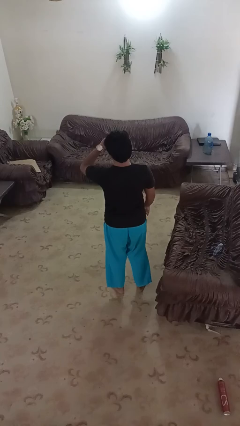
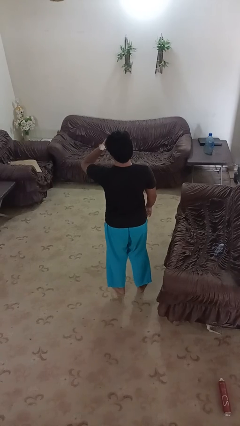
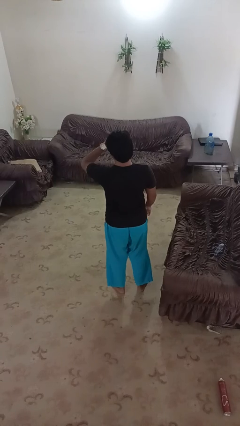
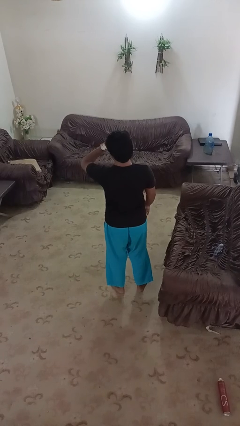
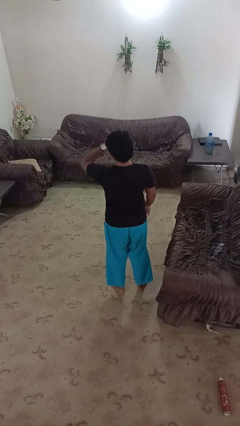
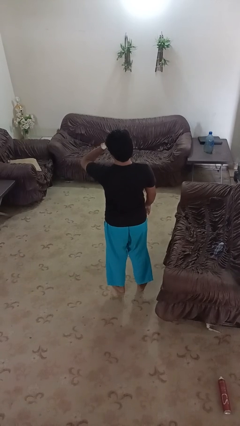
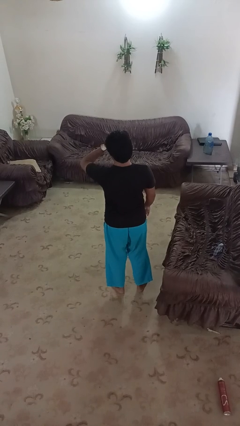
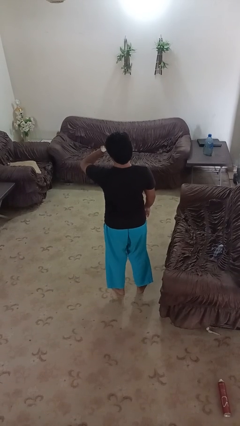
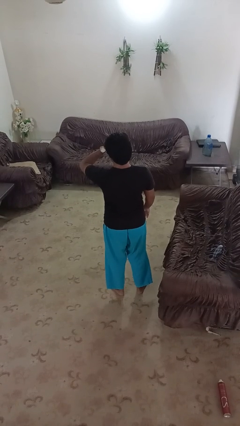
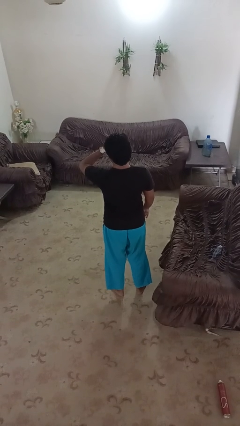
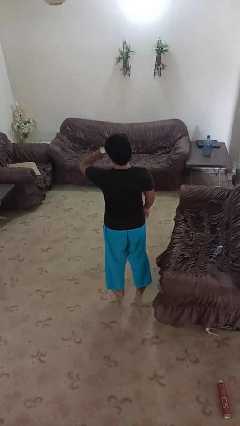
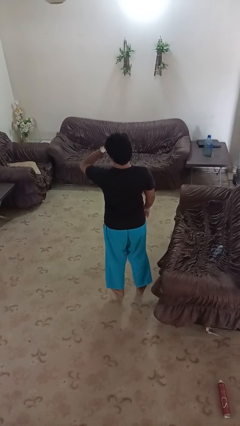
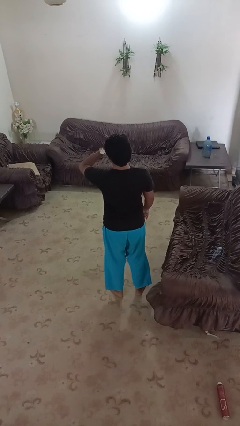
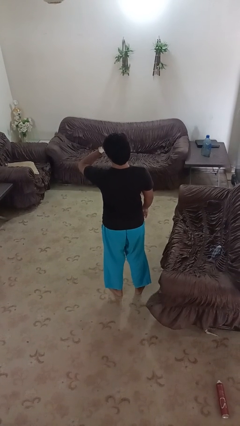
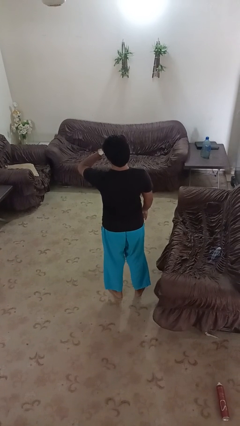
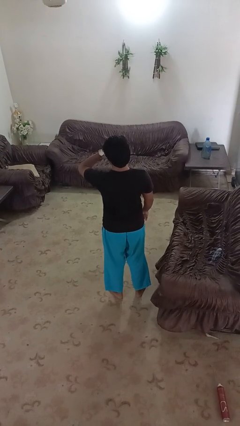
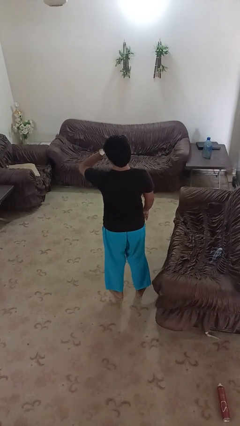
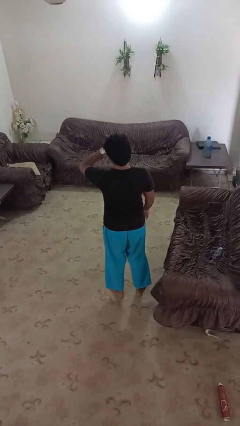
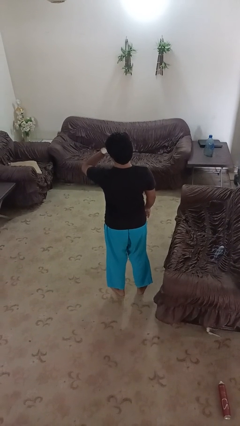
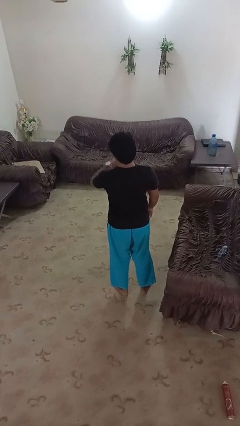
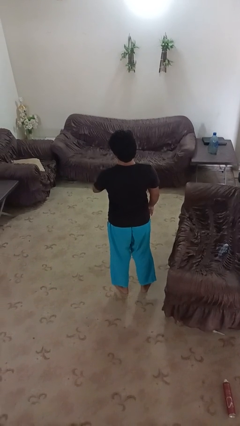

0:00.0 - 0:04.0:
person looks at wristwatch

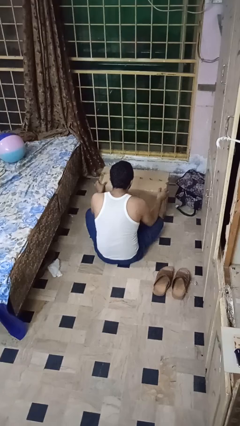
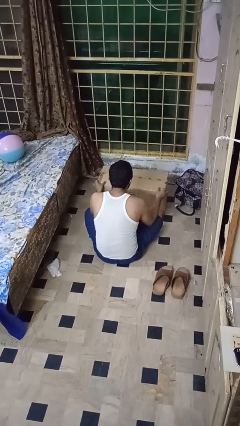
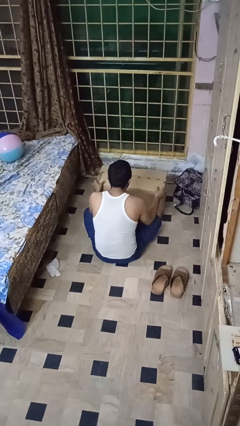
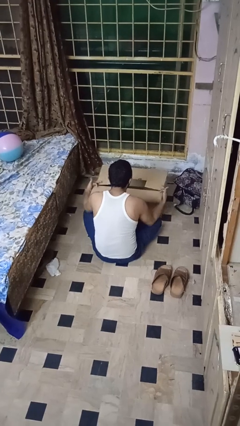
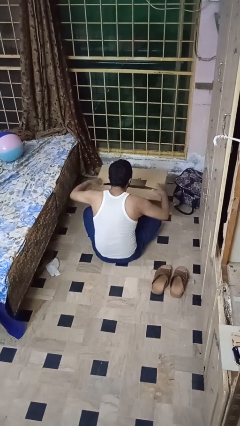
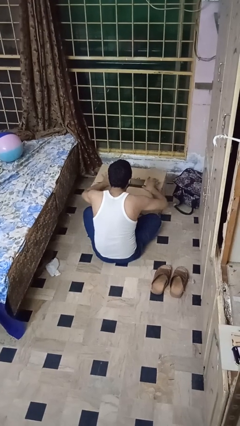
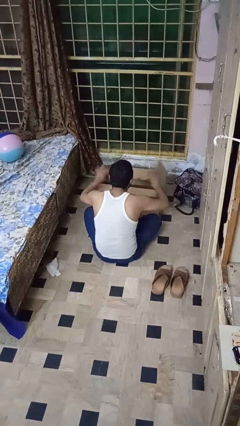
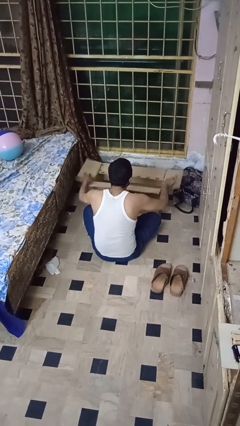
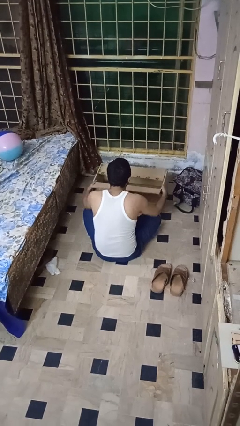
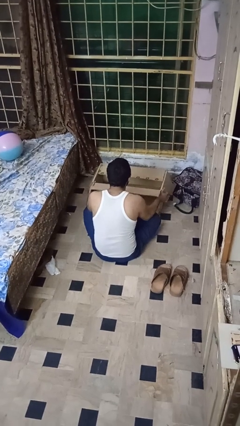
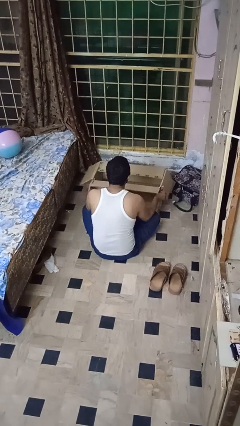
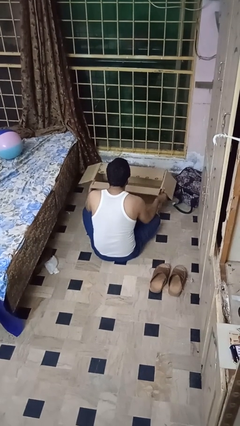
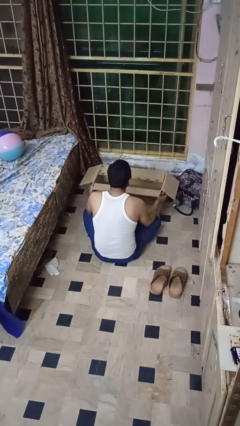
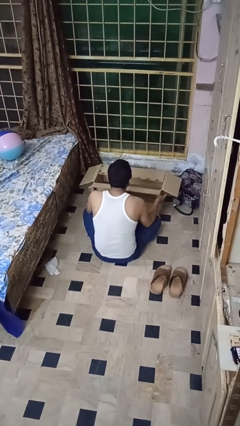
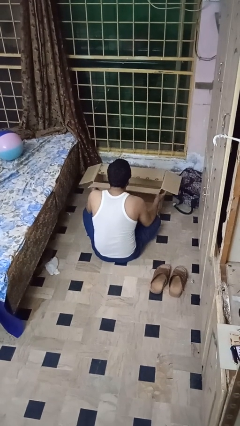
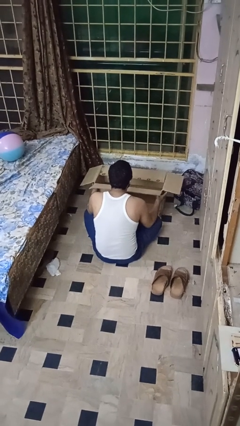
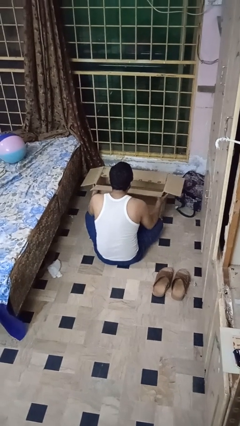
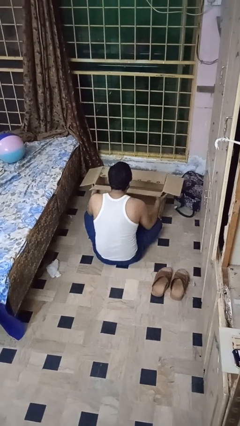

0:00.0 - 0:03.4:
person opens box

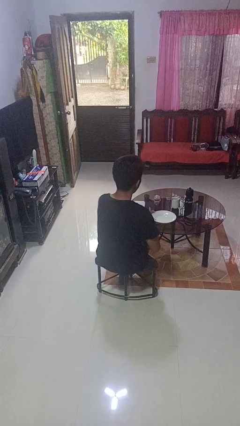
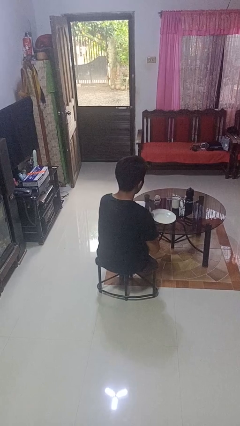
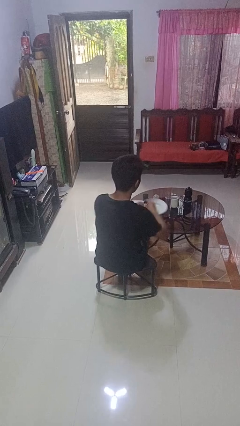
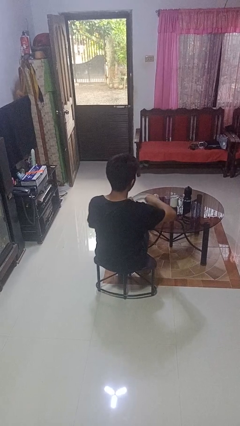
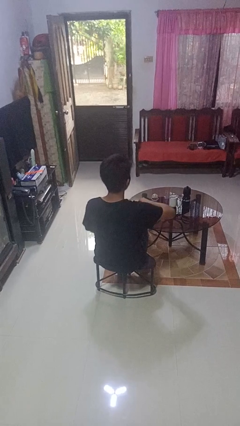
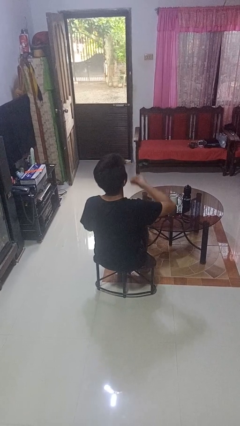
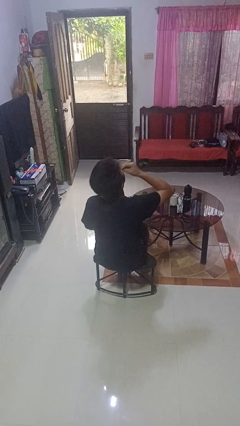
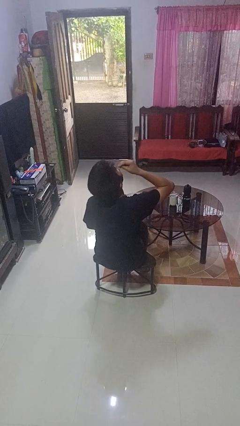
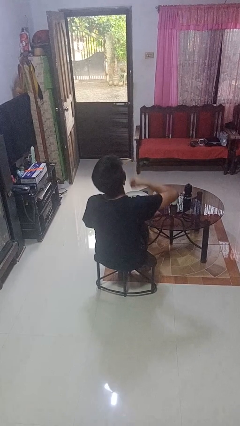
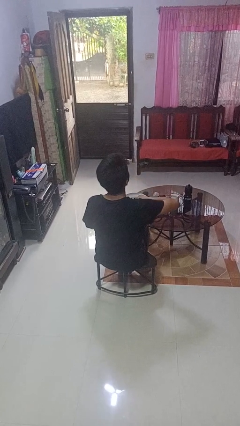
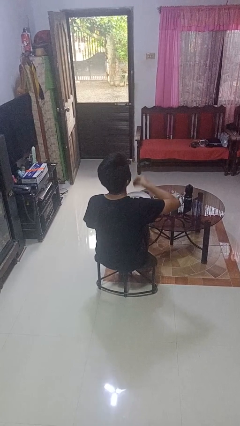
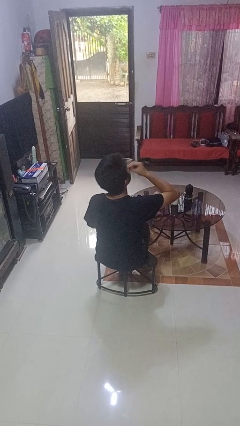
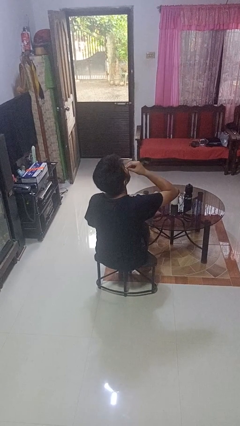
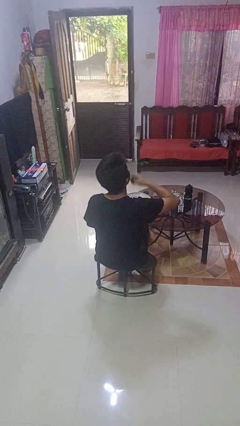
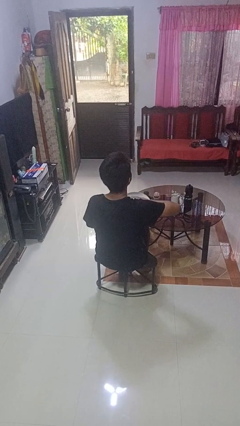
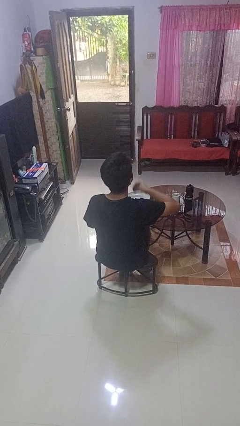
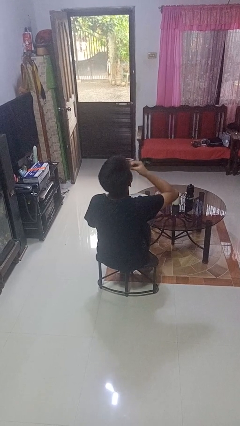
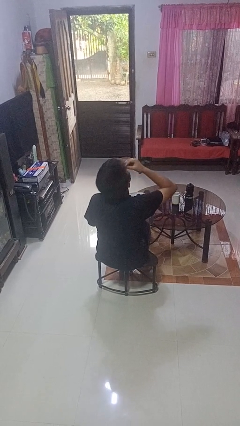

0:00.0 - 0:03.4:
person eats with hands

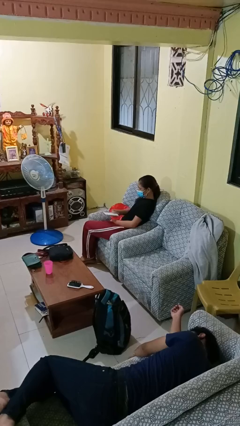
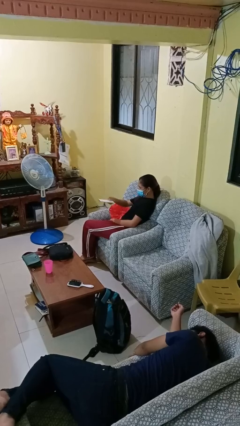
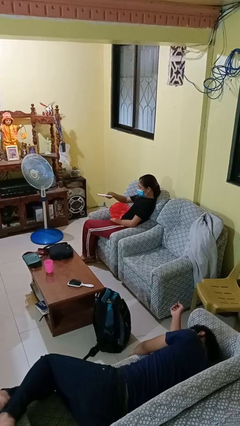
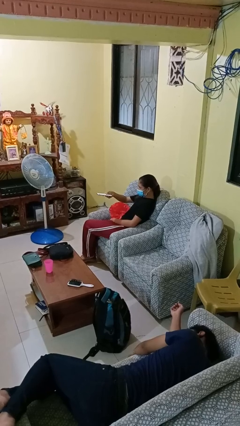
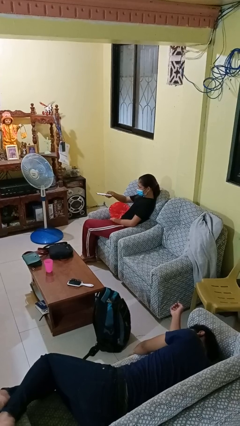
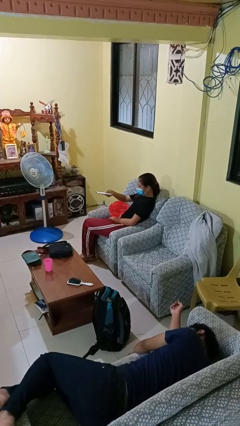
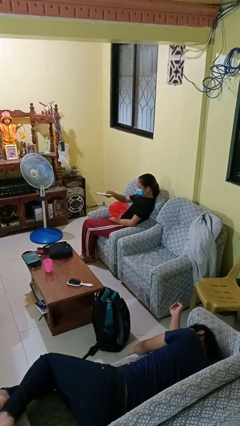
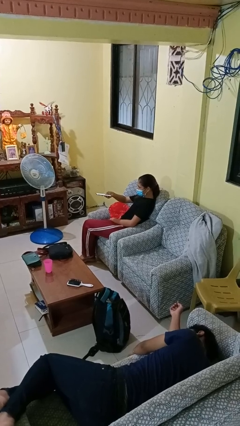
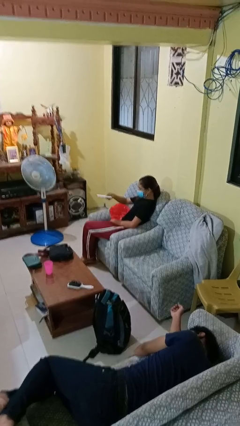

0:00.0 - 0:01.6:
person uses television remote

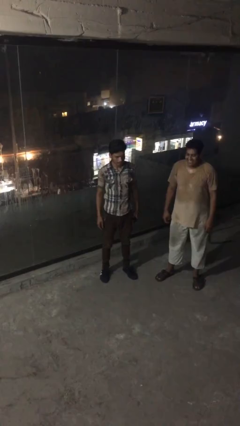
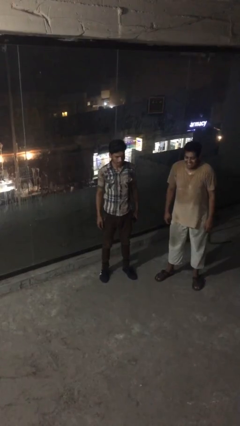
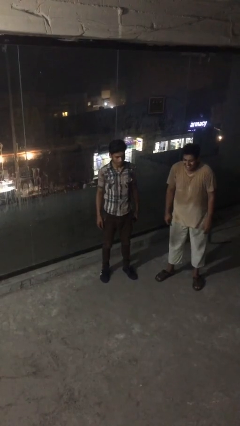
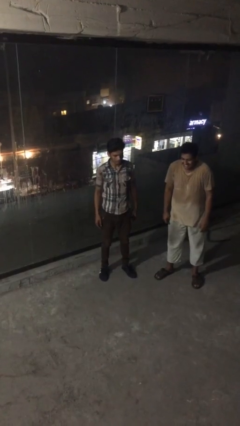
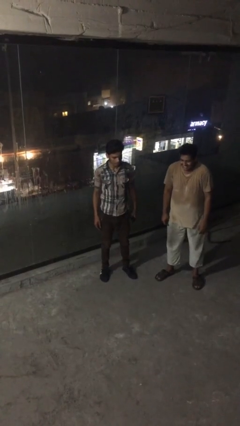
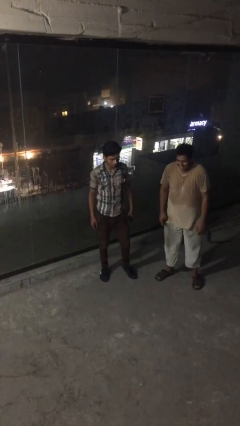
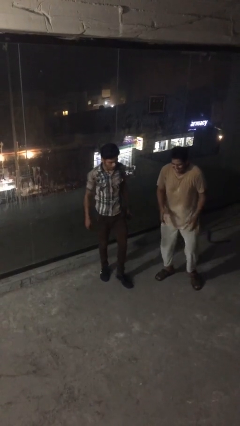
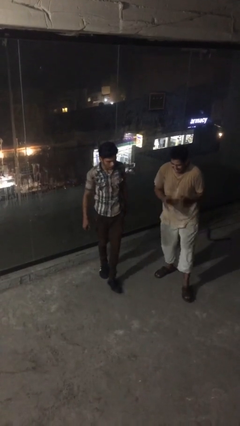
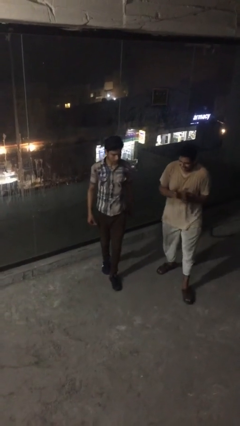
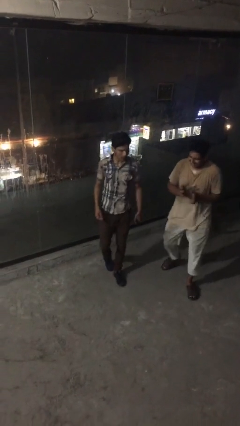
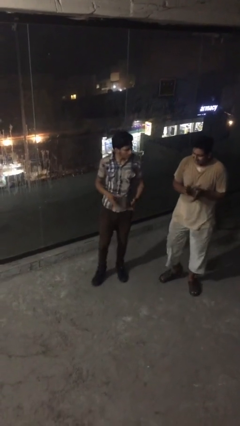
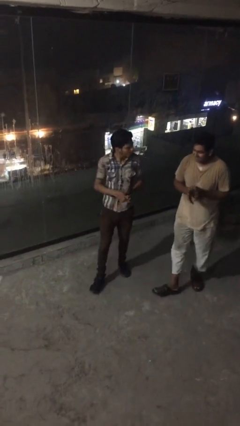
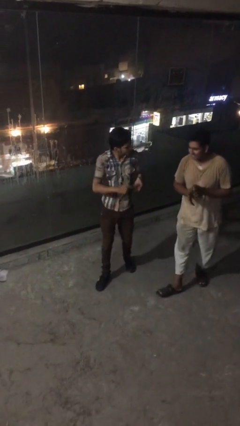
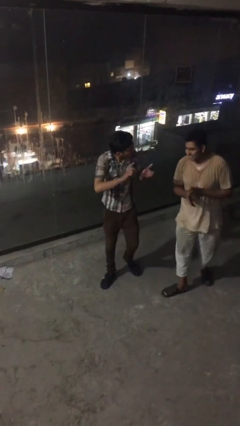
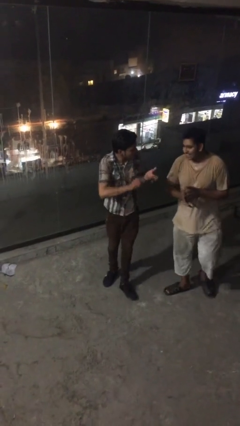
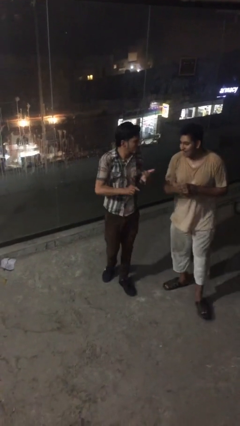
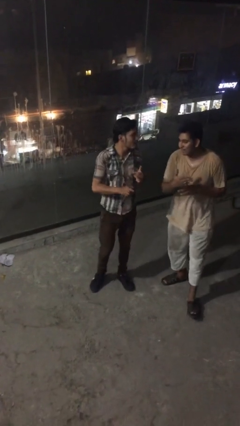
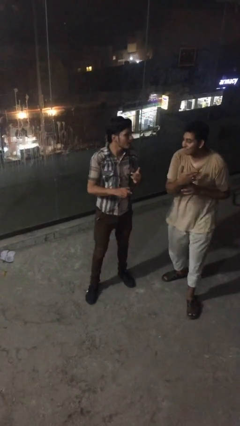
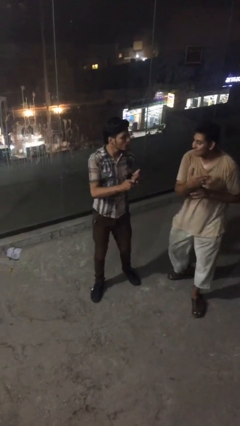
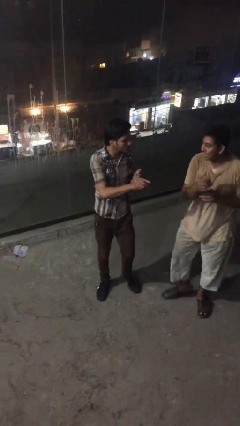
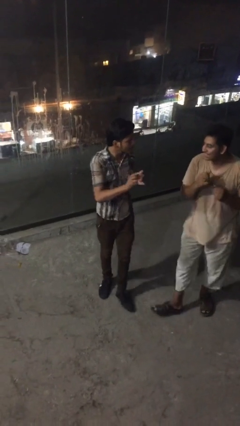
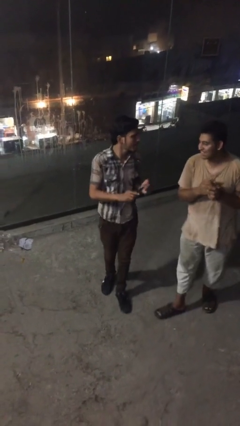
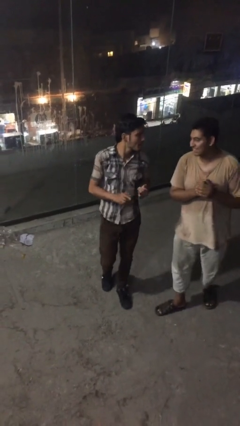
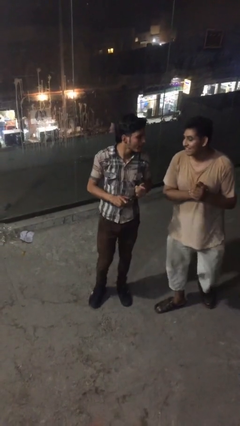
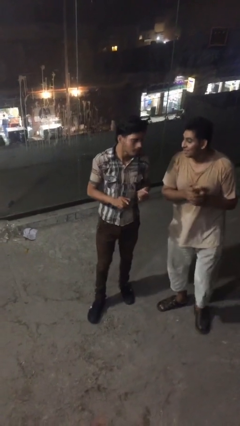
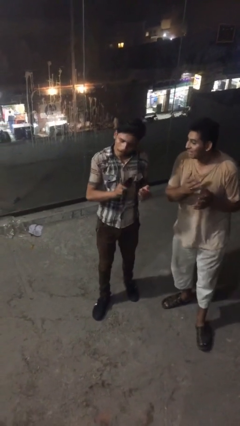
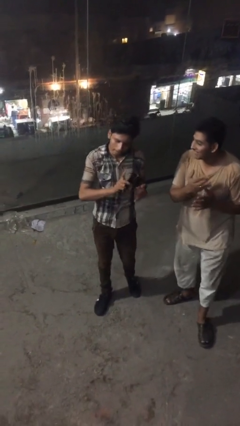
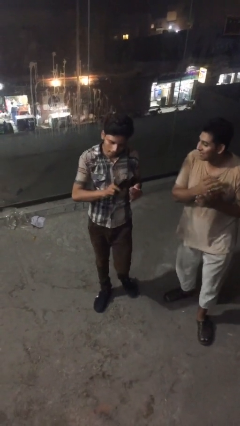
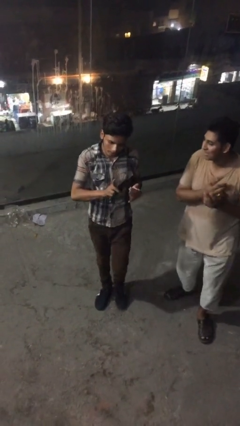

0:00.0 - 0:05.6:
person talks to person
